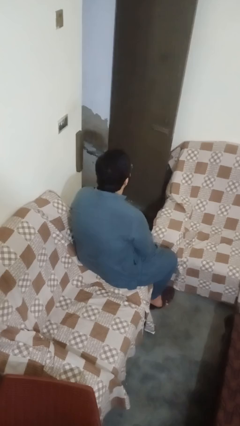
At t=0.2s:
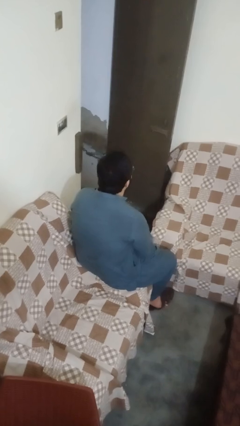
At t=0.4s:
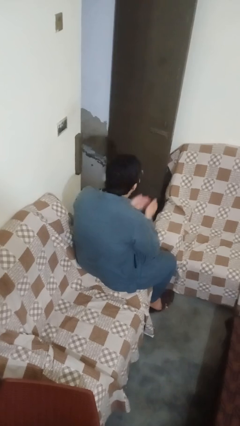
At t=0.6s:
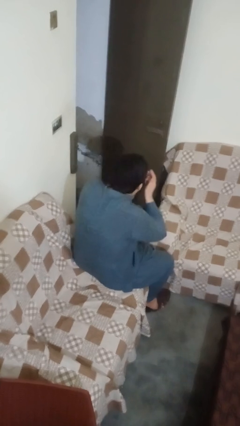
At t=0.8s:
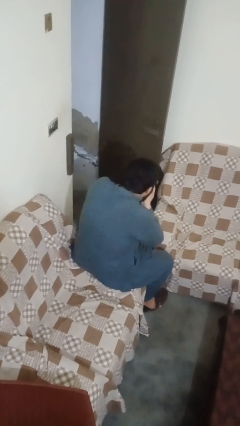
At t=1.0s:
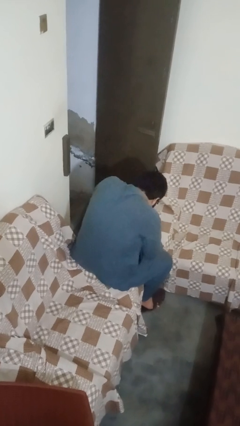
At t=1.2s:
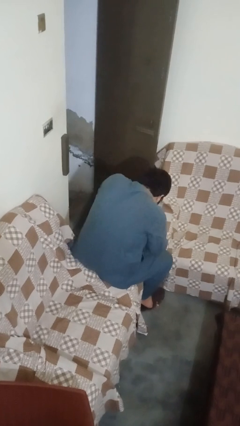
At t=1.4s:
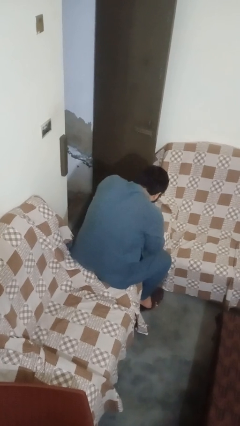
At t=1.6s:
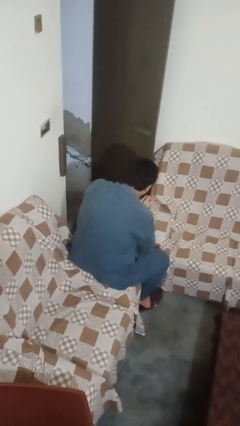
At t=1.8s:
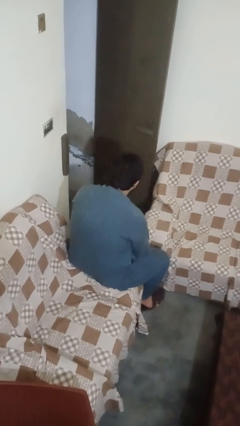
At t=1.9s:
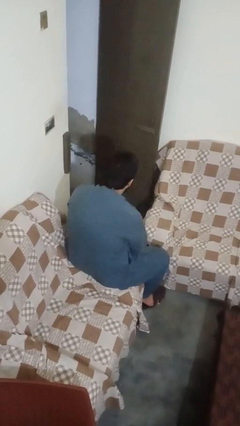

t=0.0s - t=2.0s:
person sneezes into hand

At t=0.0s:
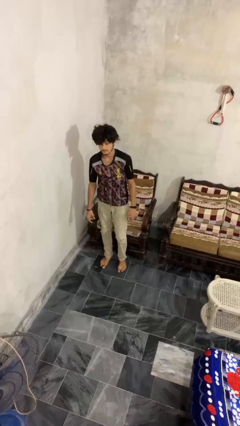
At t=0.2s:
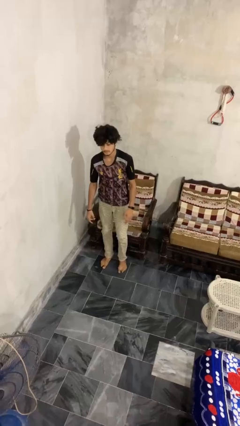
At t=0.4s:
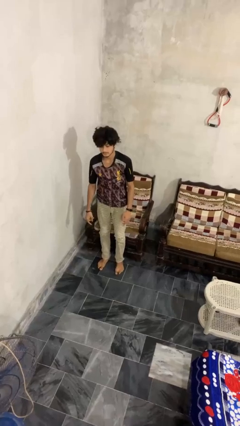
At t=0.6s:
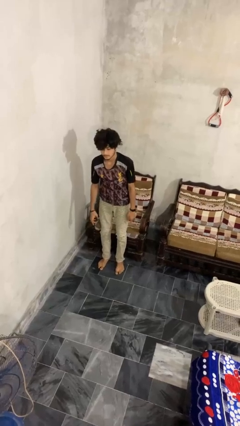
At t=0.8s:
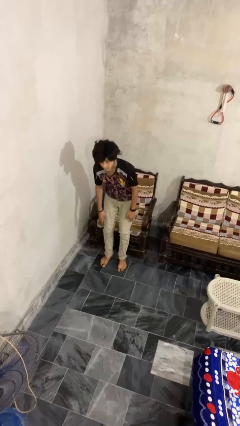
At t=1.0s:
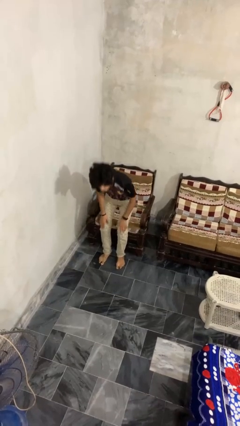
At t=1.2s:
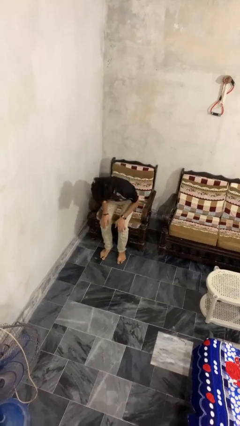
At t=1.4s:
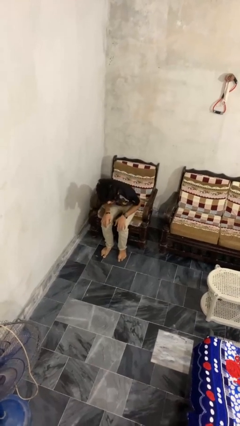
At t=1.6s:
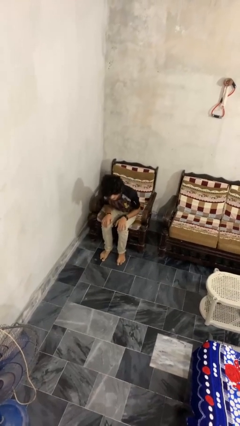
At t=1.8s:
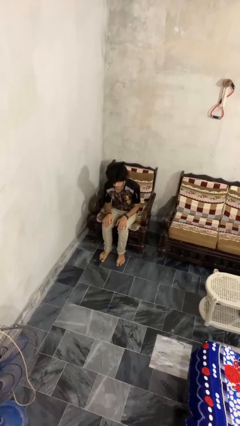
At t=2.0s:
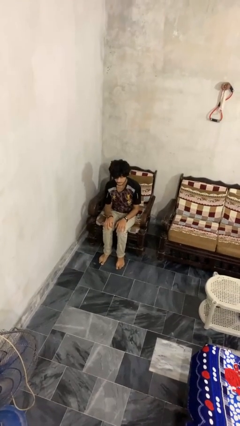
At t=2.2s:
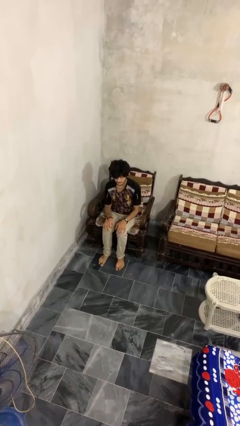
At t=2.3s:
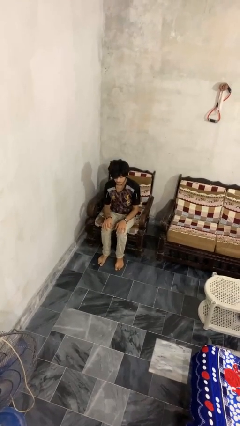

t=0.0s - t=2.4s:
person sits down

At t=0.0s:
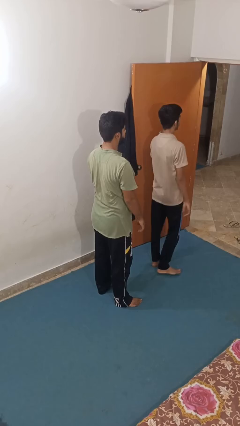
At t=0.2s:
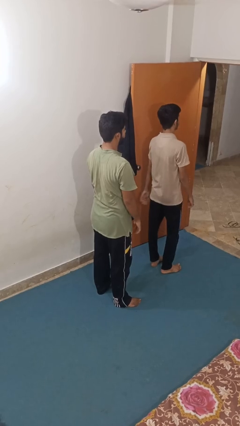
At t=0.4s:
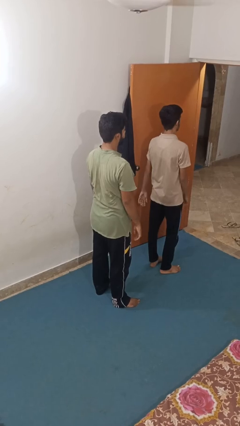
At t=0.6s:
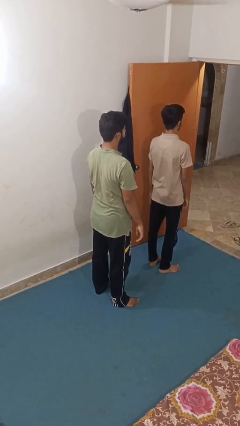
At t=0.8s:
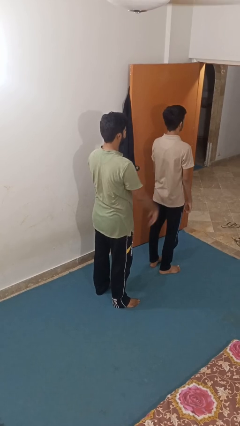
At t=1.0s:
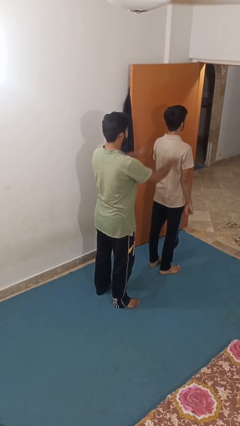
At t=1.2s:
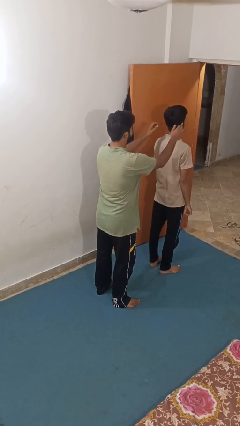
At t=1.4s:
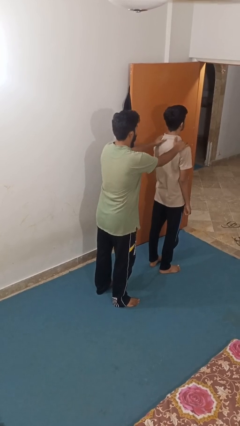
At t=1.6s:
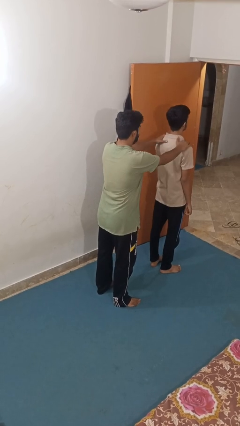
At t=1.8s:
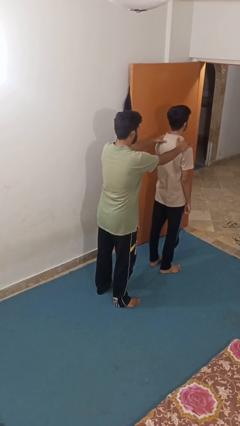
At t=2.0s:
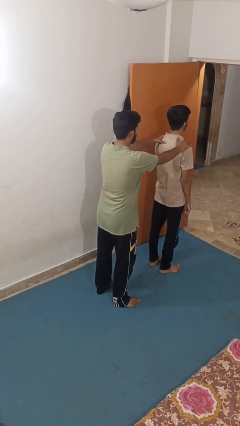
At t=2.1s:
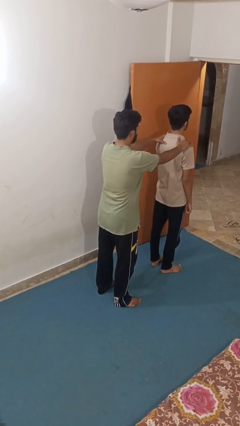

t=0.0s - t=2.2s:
person grabs person by shoulder

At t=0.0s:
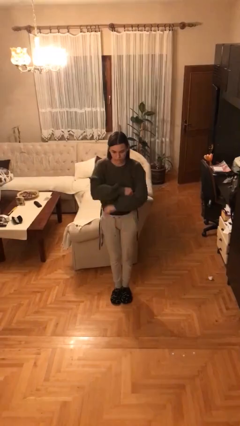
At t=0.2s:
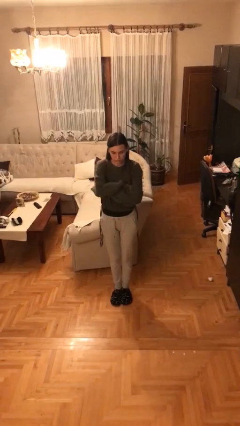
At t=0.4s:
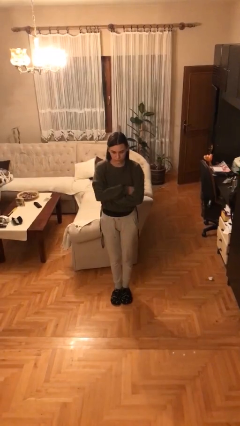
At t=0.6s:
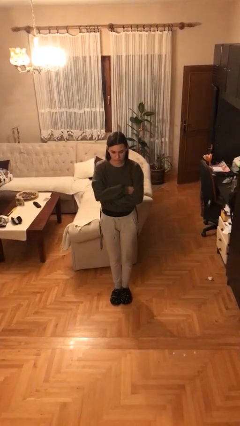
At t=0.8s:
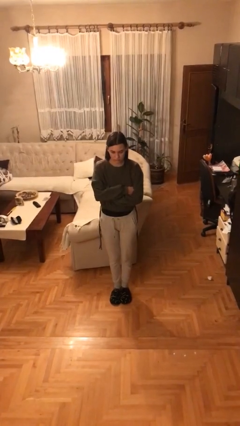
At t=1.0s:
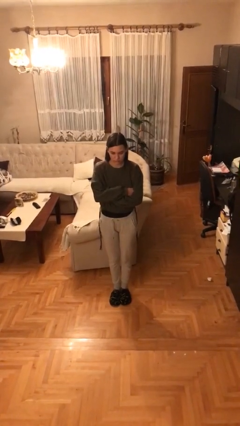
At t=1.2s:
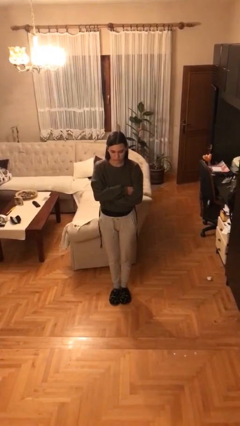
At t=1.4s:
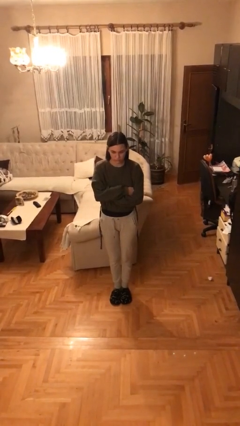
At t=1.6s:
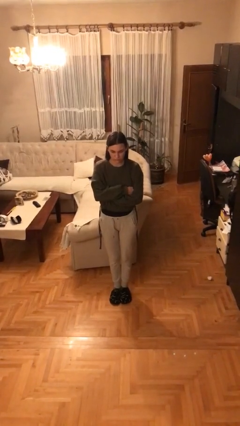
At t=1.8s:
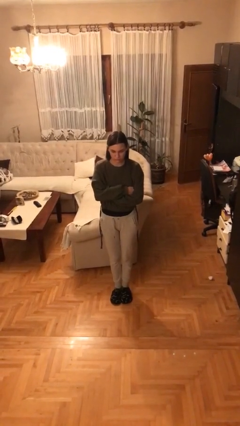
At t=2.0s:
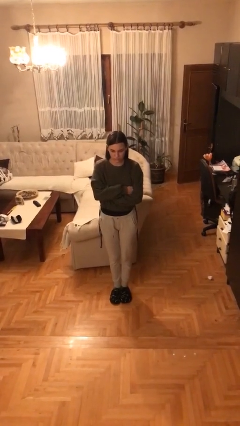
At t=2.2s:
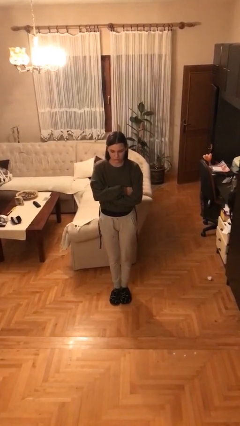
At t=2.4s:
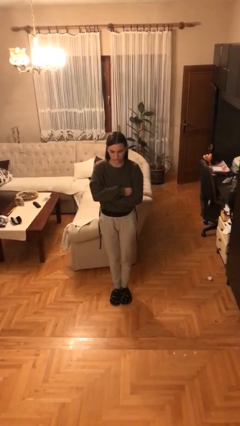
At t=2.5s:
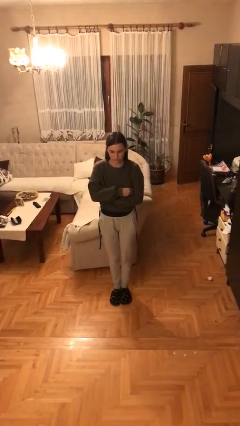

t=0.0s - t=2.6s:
person crosses arms

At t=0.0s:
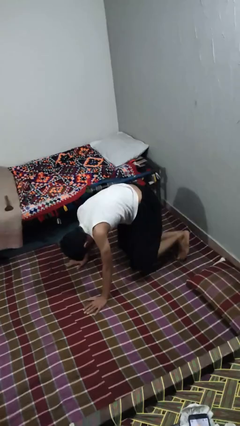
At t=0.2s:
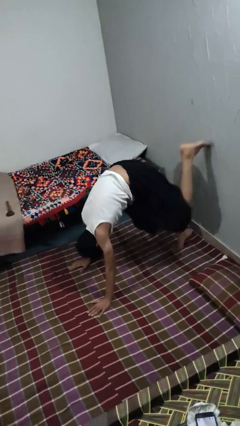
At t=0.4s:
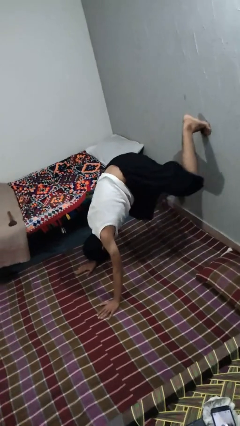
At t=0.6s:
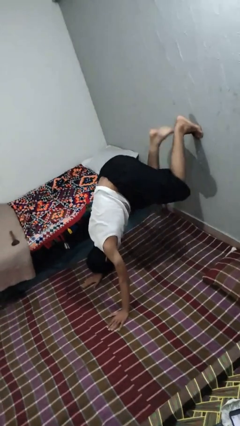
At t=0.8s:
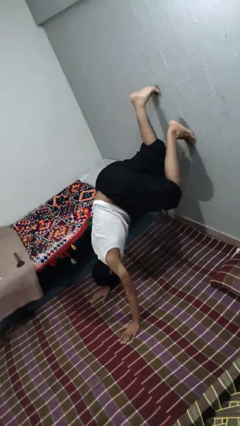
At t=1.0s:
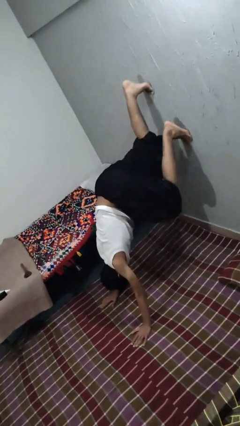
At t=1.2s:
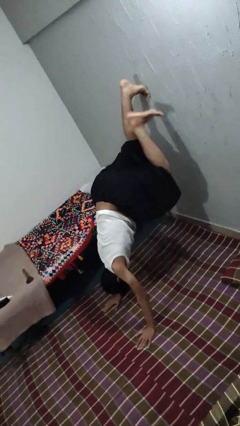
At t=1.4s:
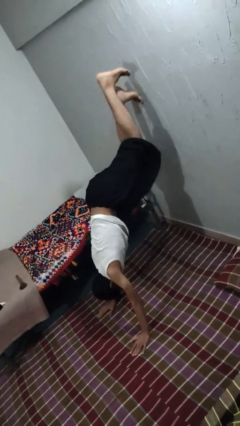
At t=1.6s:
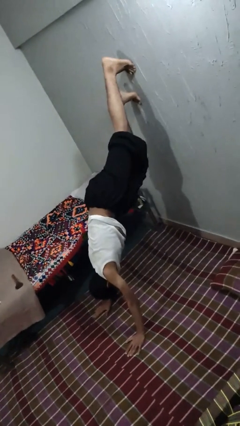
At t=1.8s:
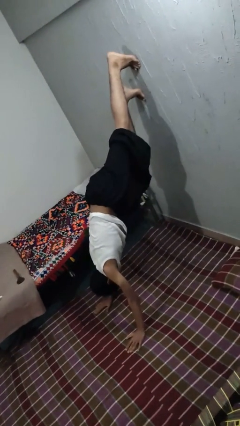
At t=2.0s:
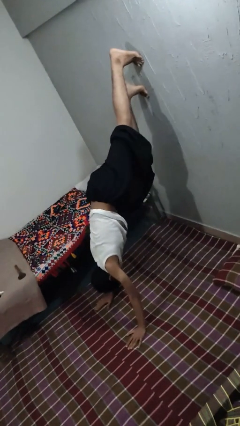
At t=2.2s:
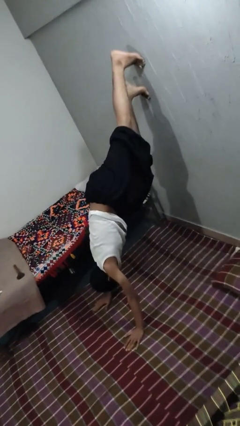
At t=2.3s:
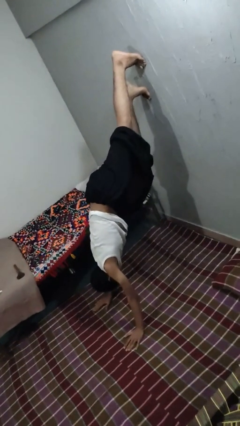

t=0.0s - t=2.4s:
person handstand

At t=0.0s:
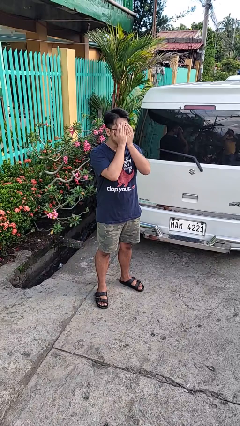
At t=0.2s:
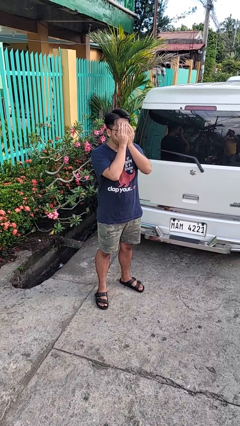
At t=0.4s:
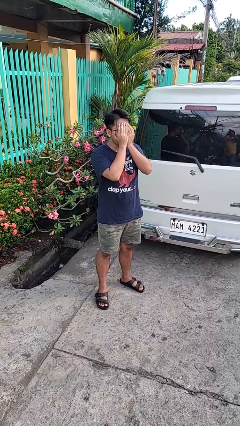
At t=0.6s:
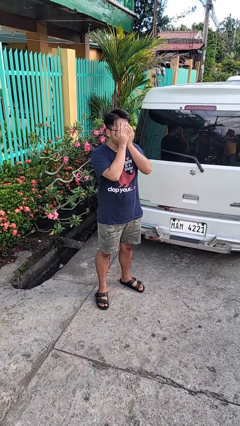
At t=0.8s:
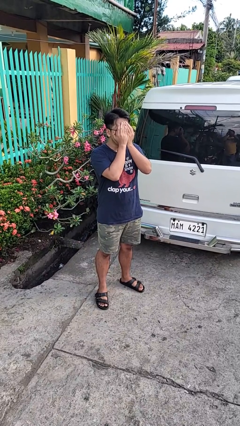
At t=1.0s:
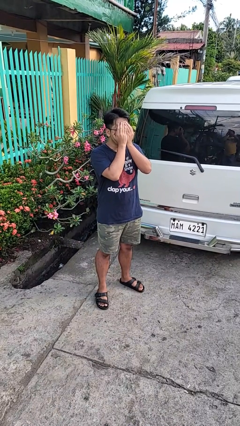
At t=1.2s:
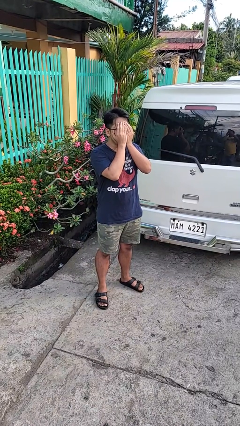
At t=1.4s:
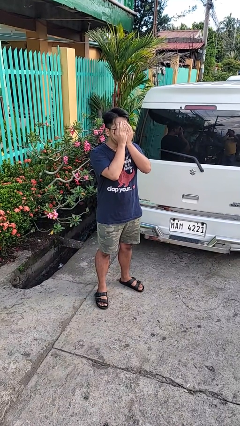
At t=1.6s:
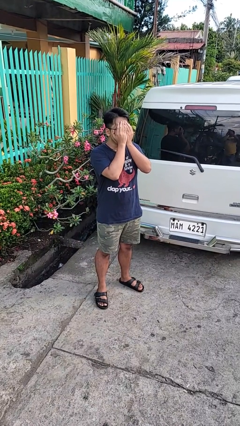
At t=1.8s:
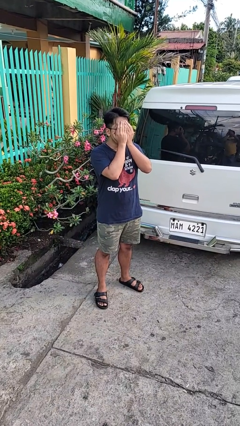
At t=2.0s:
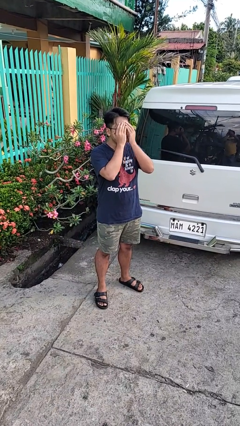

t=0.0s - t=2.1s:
person covers face with hands

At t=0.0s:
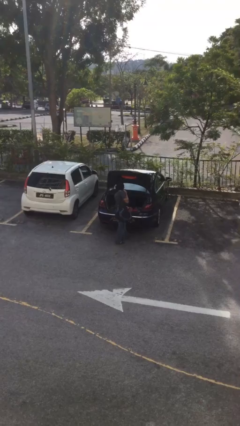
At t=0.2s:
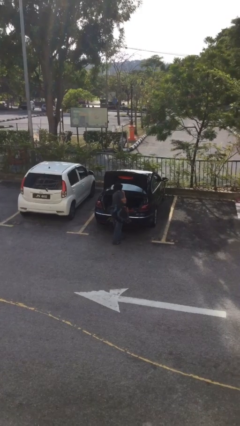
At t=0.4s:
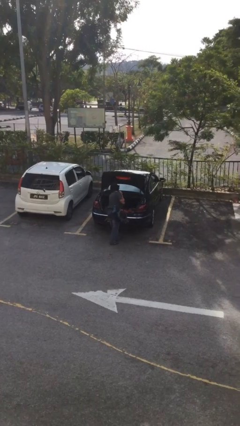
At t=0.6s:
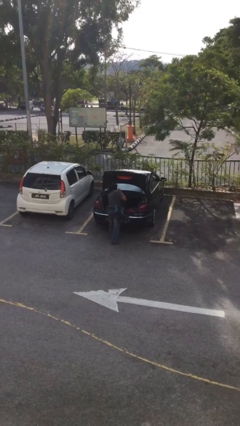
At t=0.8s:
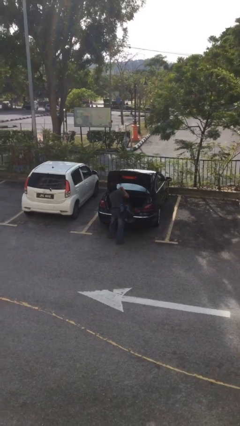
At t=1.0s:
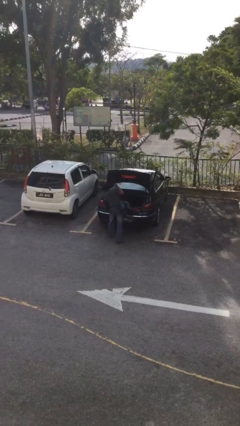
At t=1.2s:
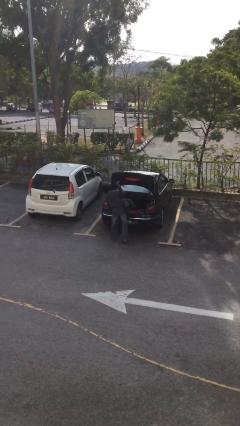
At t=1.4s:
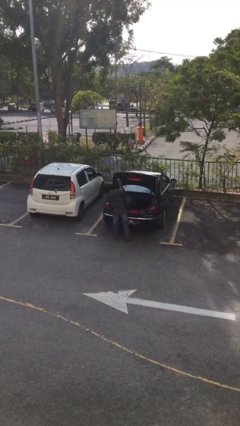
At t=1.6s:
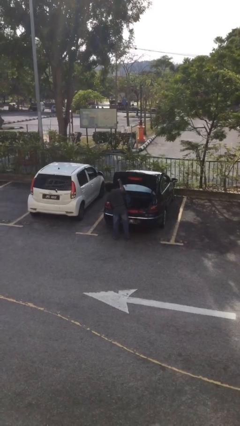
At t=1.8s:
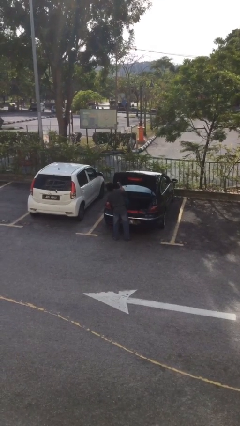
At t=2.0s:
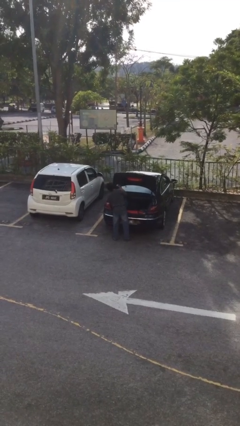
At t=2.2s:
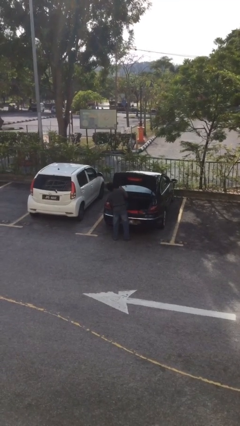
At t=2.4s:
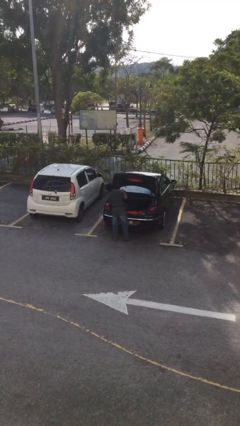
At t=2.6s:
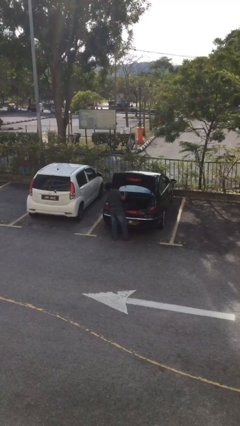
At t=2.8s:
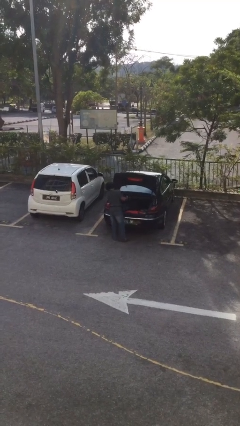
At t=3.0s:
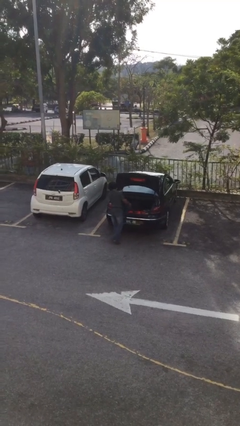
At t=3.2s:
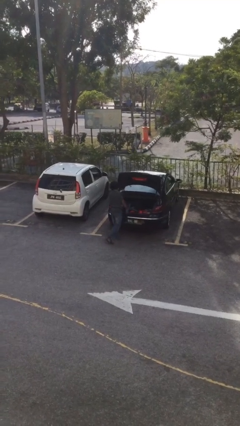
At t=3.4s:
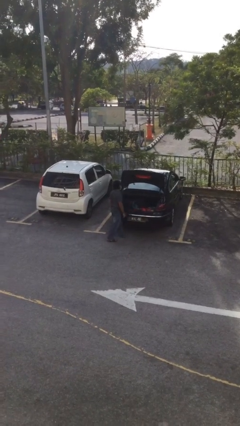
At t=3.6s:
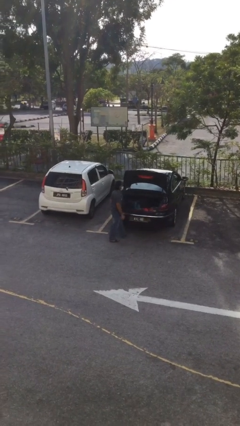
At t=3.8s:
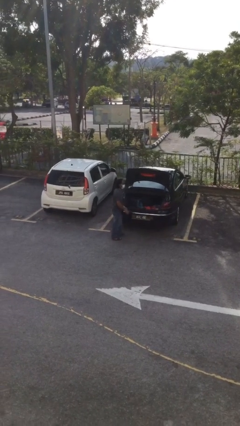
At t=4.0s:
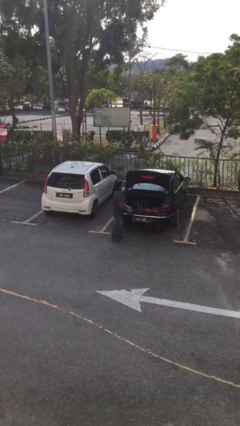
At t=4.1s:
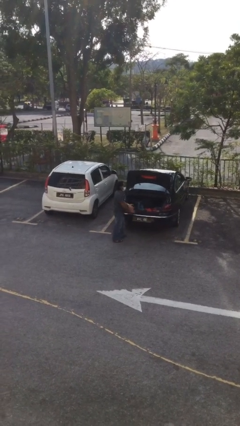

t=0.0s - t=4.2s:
person loads car
